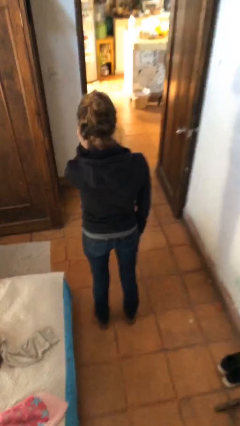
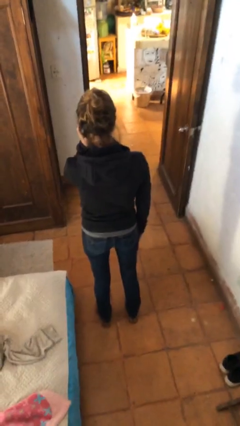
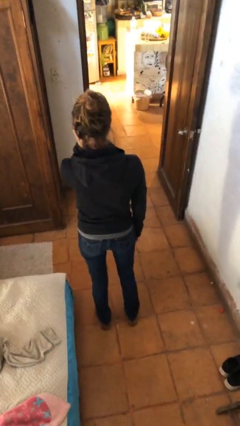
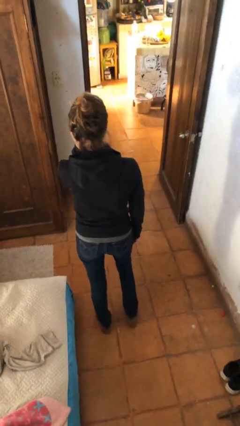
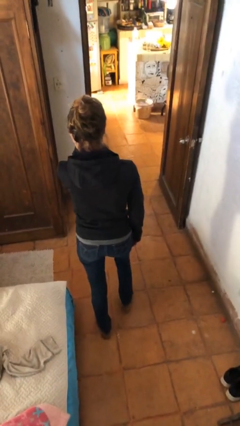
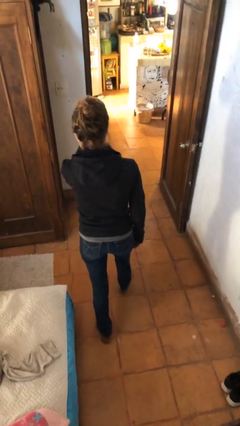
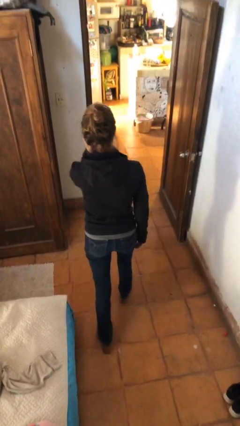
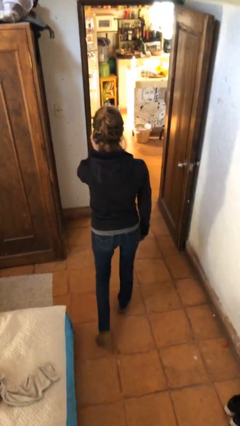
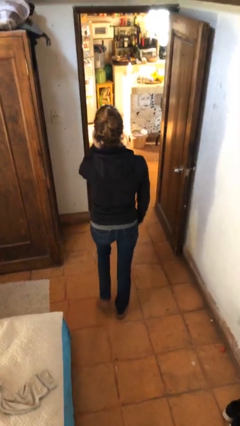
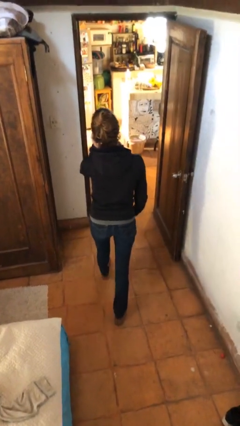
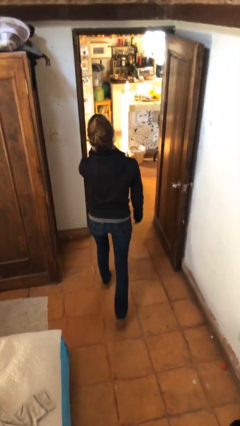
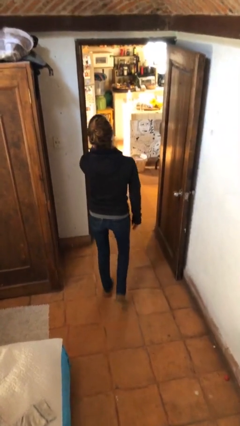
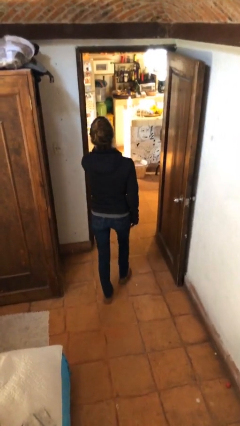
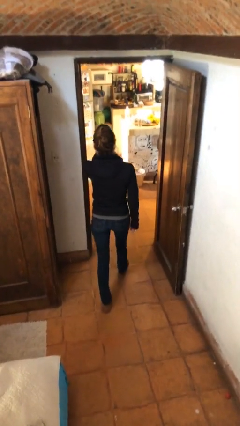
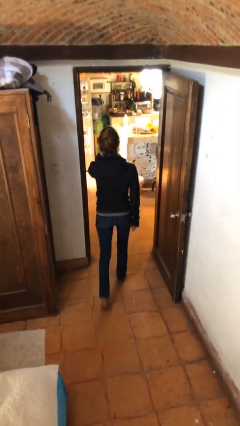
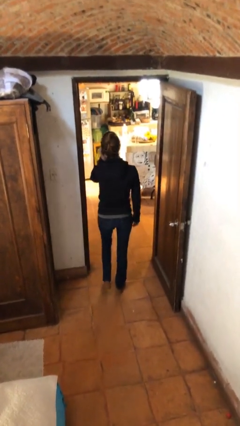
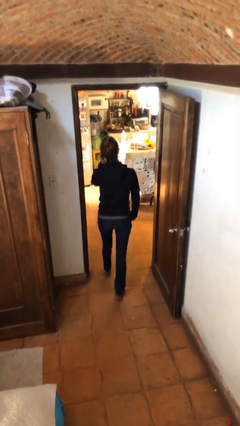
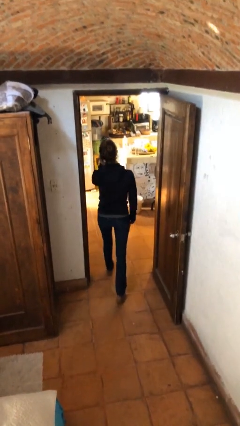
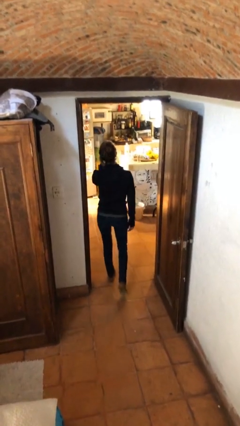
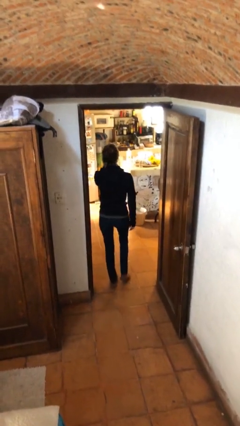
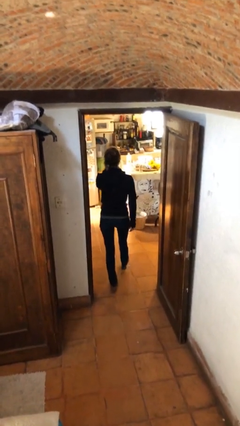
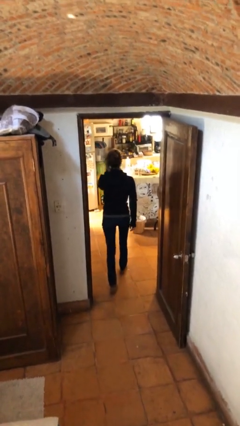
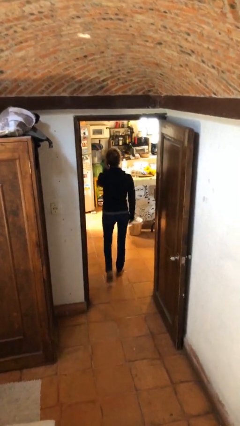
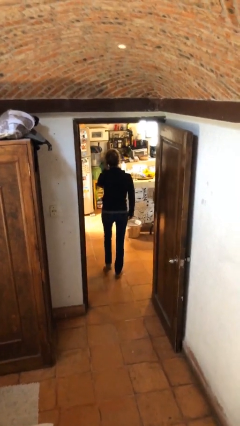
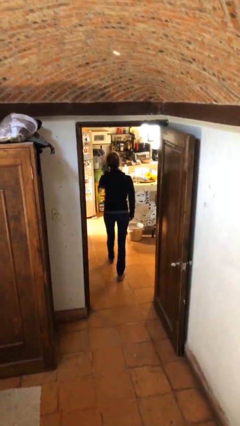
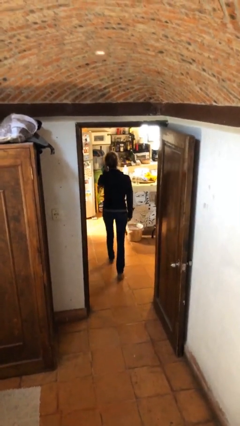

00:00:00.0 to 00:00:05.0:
person exits scene through structure

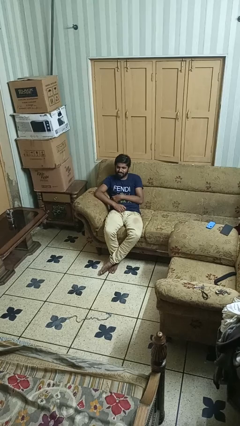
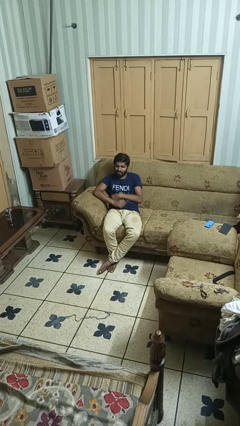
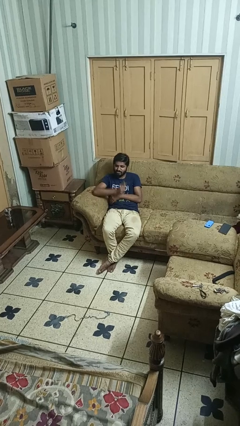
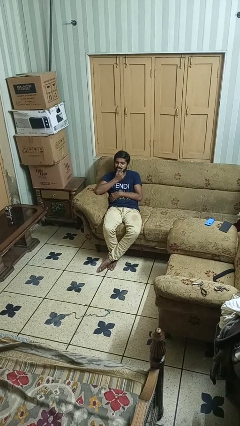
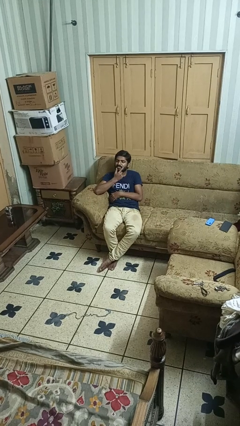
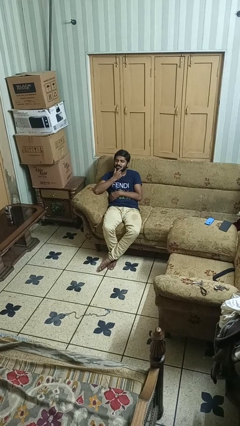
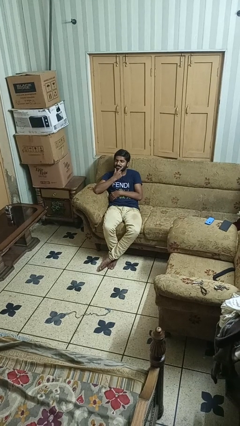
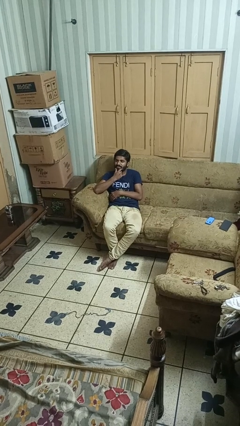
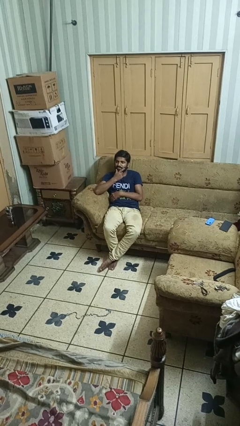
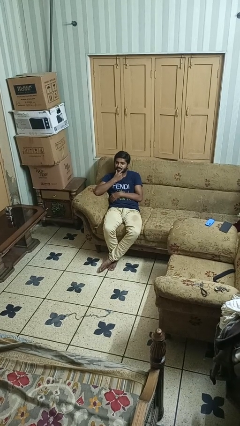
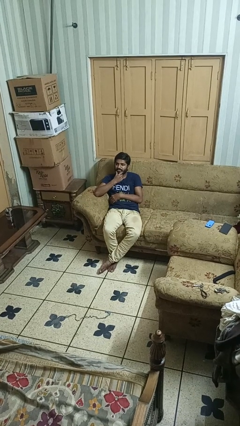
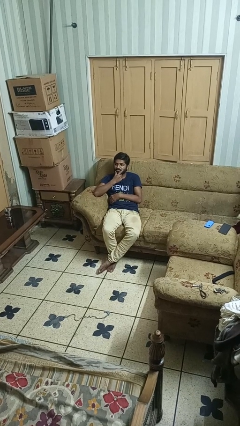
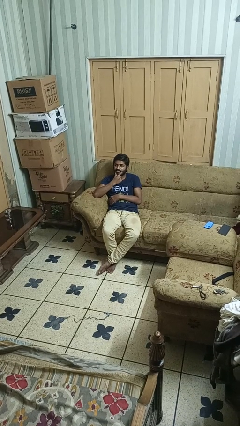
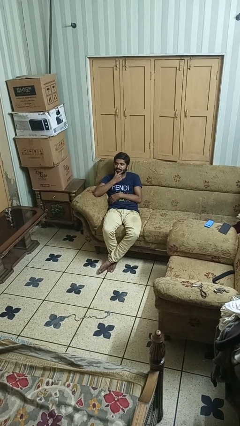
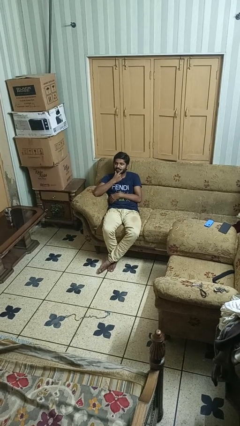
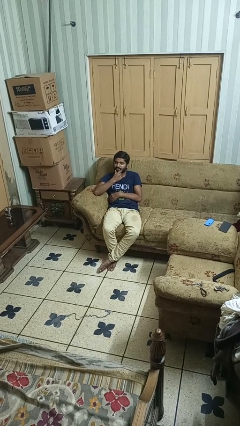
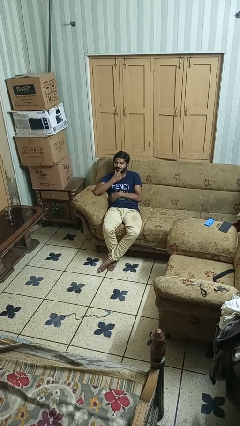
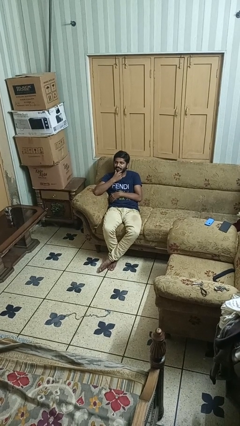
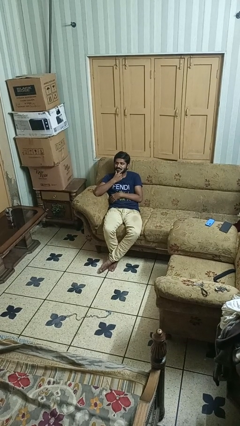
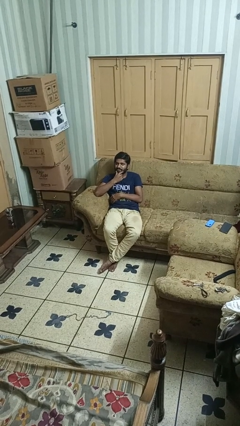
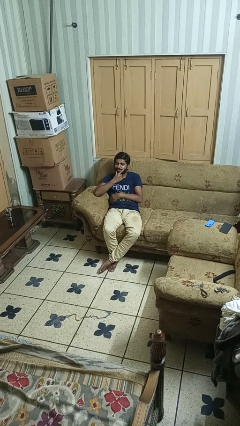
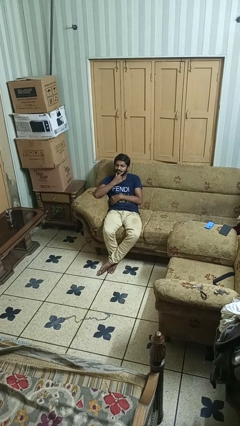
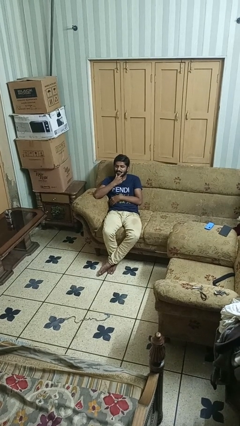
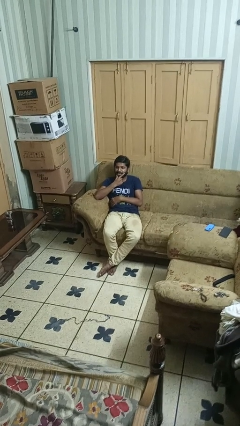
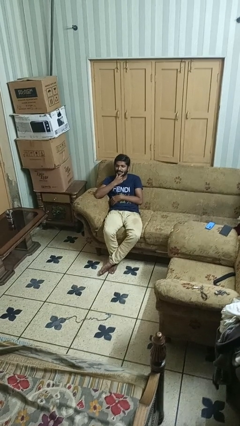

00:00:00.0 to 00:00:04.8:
person strokes chin

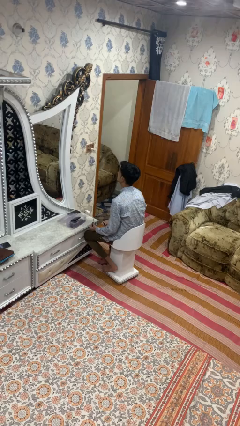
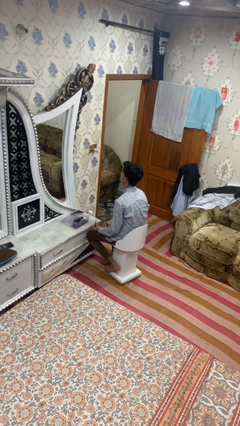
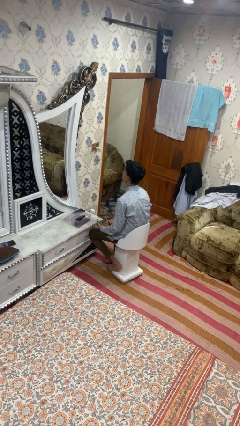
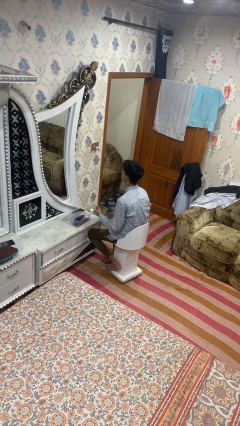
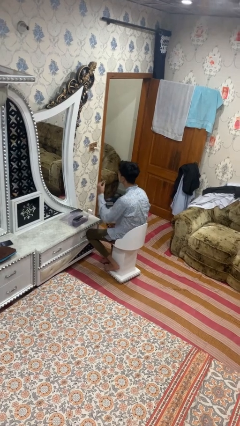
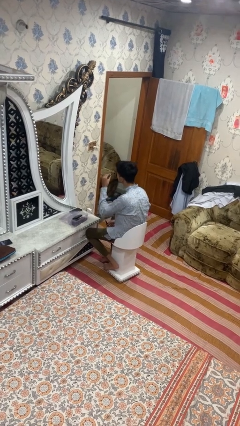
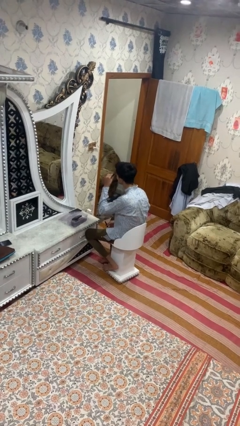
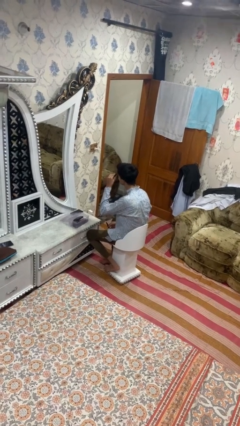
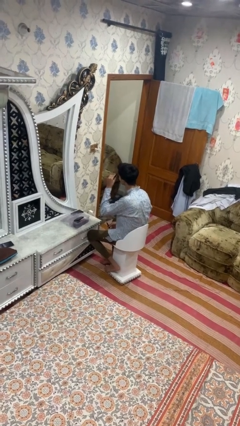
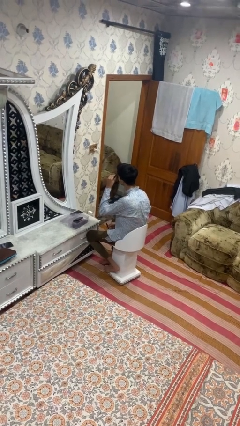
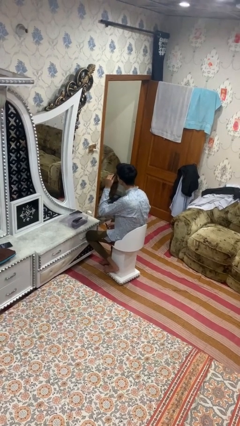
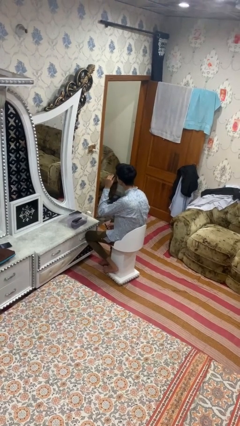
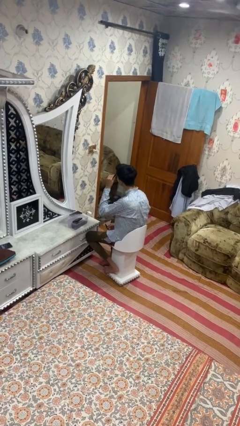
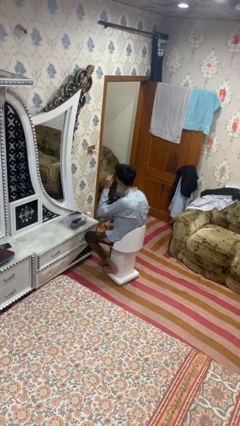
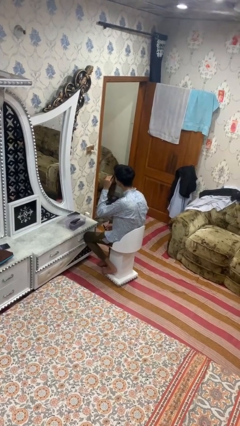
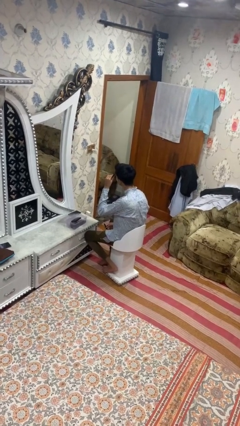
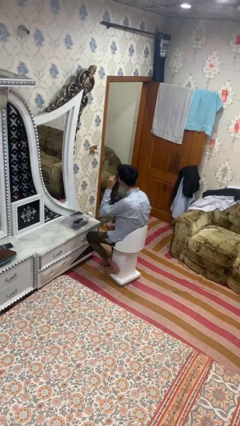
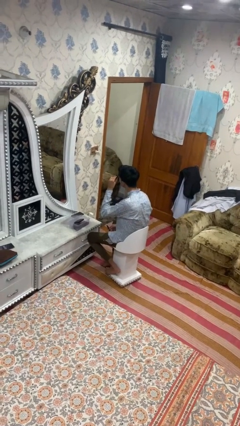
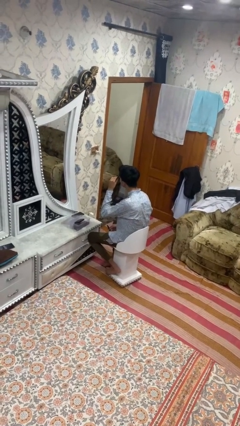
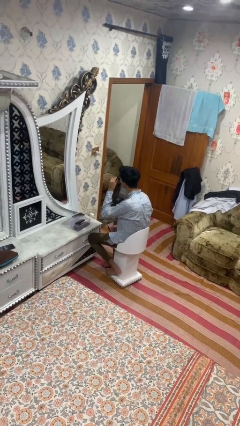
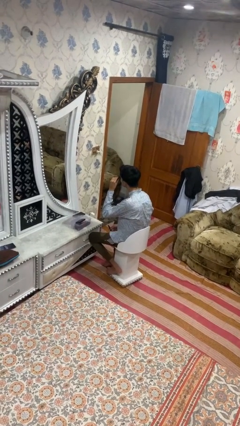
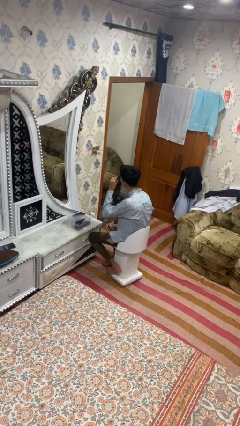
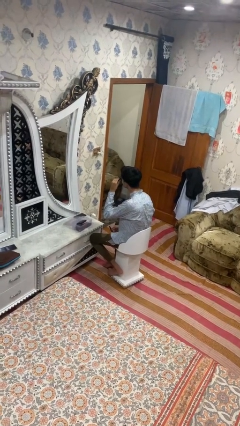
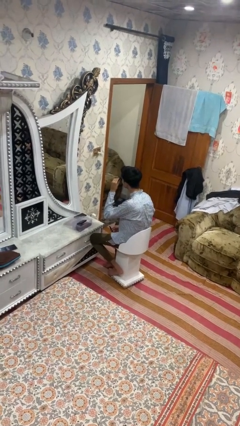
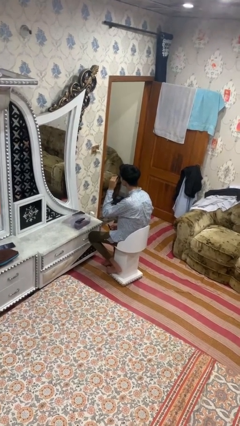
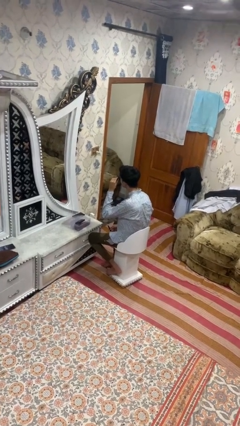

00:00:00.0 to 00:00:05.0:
person applies eye makeup

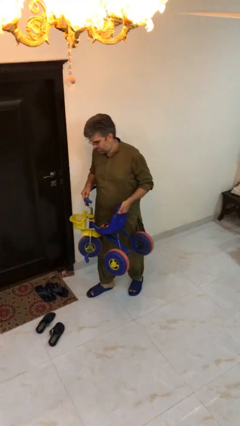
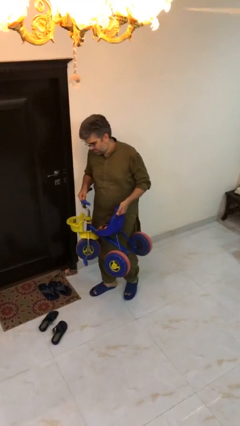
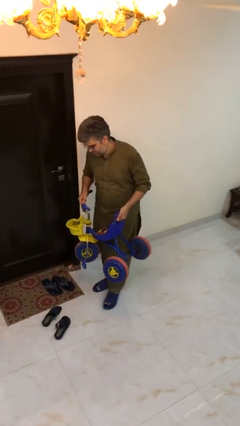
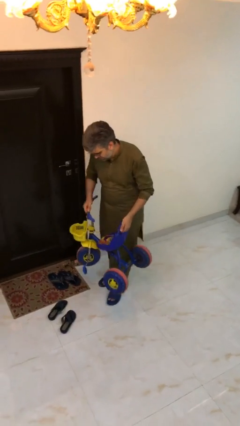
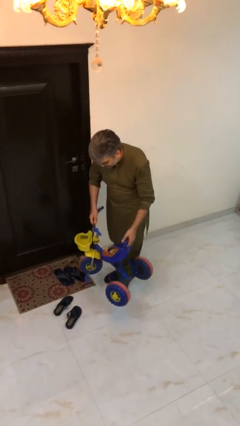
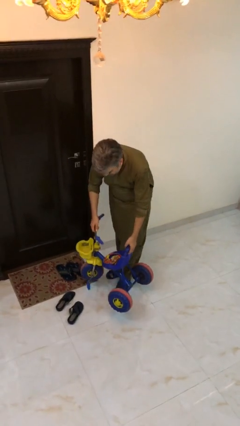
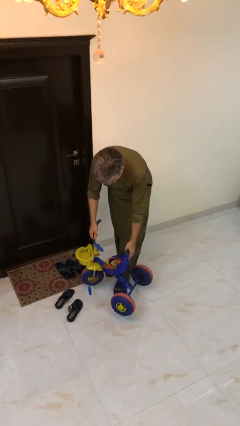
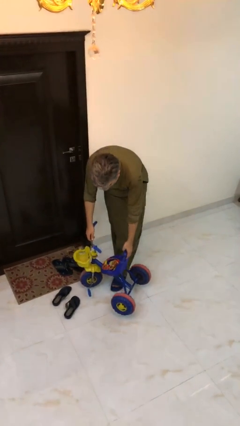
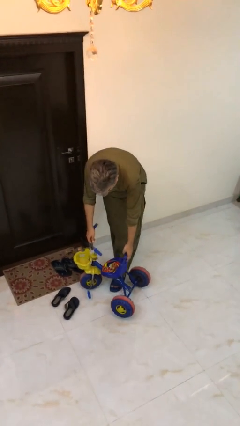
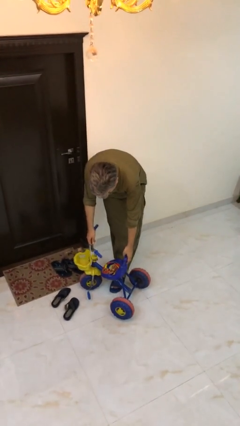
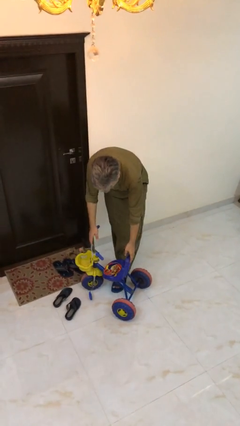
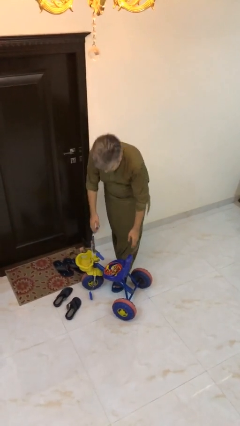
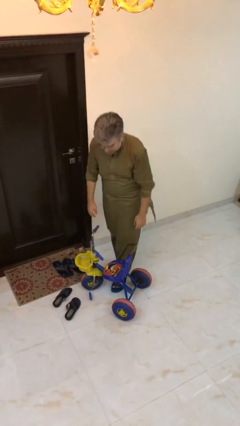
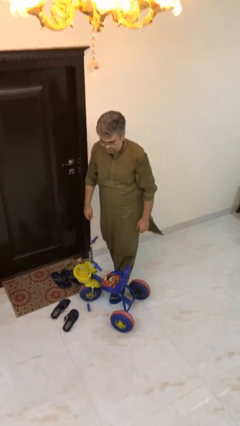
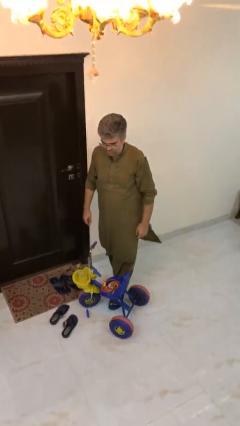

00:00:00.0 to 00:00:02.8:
person puts down object on floor
